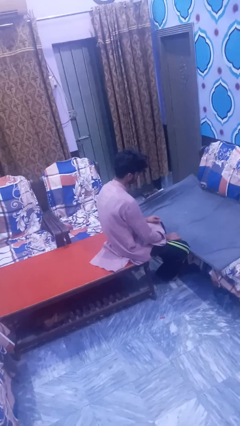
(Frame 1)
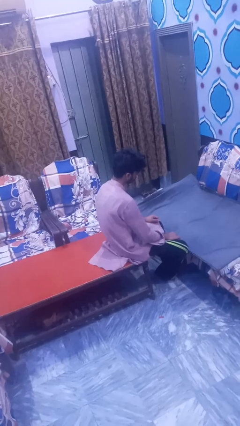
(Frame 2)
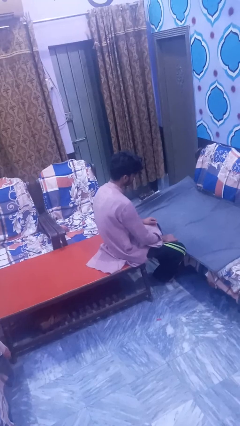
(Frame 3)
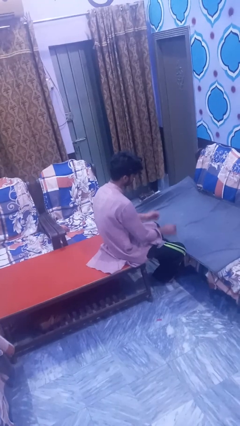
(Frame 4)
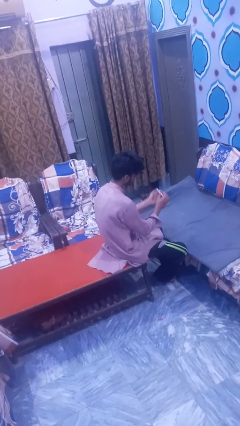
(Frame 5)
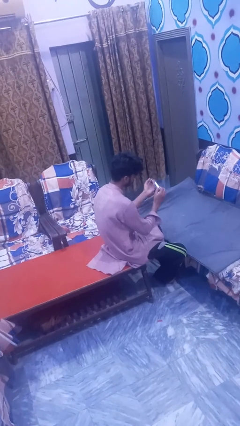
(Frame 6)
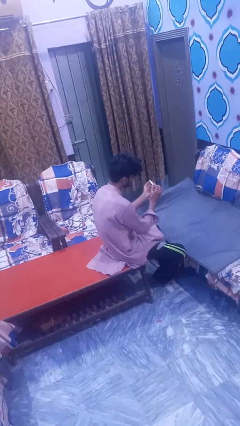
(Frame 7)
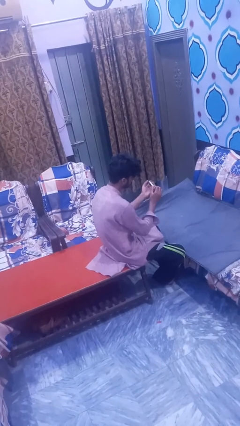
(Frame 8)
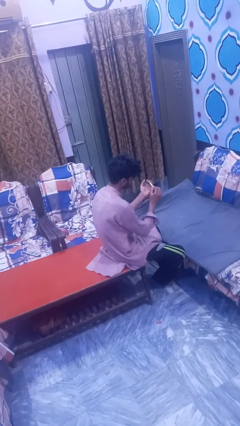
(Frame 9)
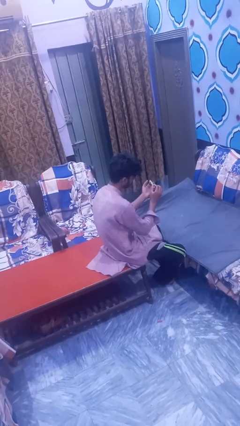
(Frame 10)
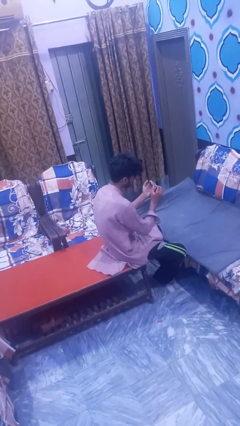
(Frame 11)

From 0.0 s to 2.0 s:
person files fingernails

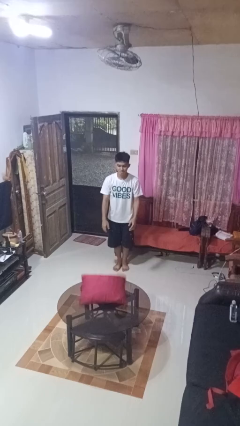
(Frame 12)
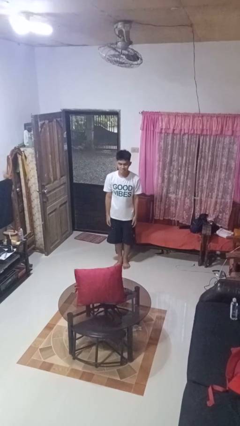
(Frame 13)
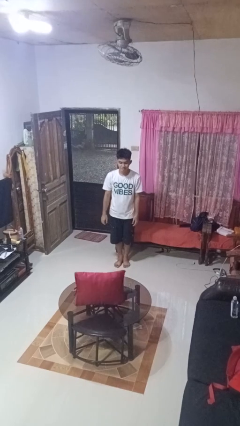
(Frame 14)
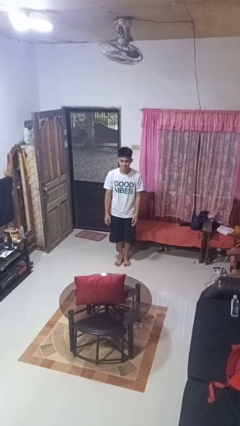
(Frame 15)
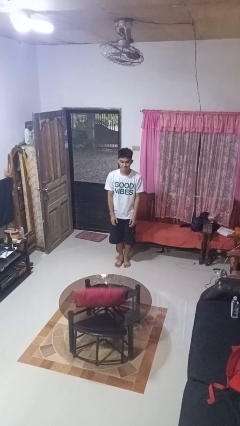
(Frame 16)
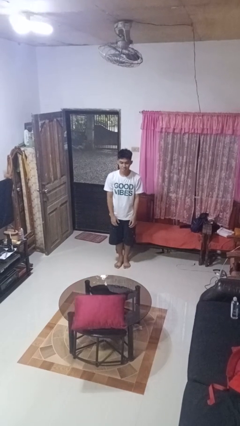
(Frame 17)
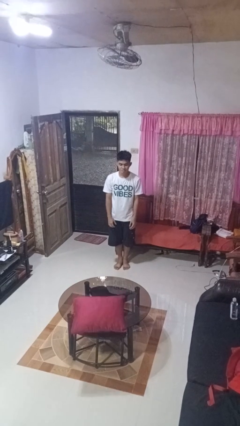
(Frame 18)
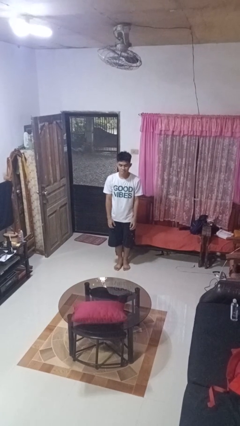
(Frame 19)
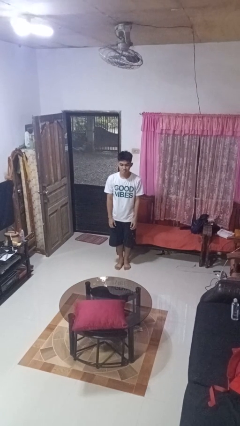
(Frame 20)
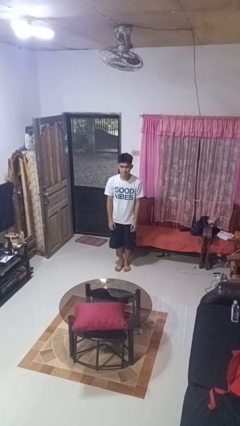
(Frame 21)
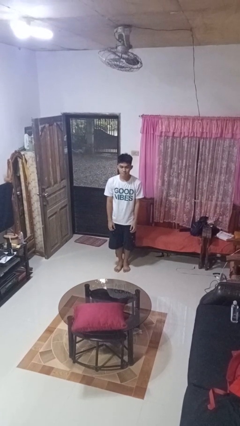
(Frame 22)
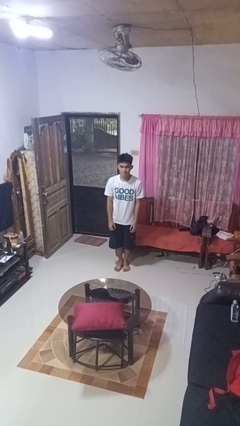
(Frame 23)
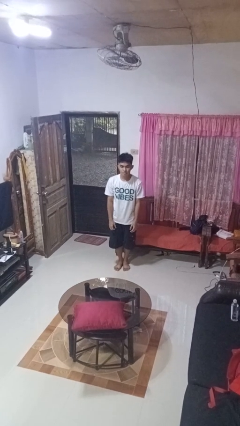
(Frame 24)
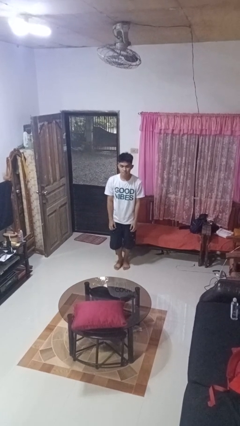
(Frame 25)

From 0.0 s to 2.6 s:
person throws object on table

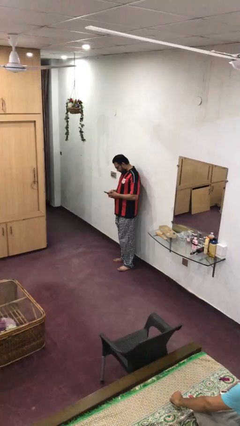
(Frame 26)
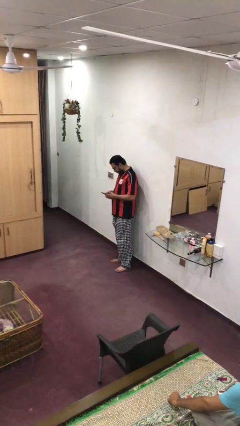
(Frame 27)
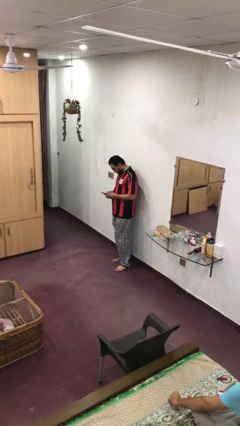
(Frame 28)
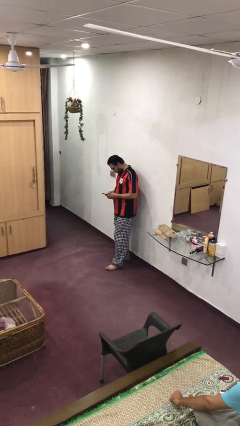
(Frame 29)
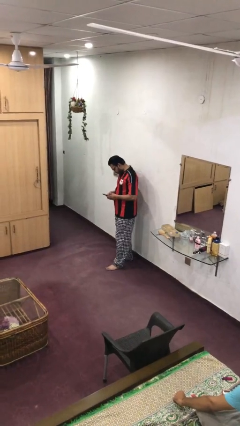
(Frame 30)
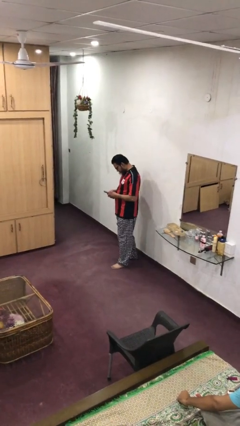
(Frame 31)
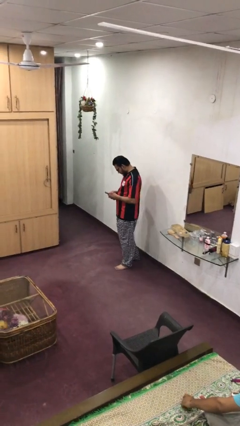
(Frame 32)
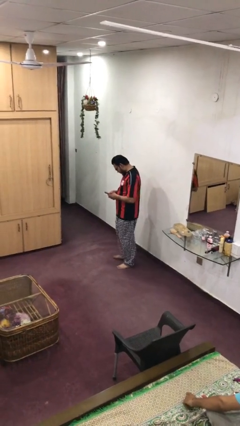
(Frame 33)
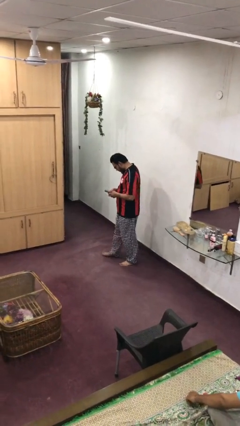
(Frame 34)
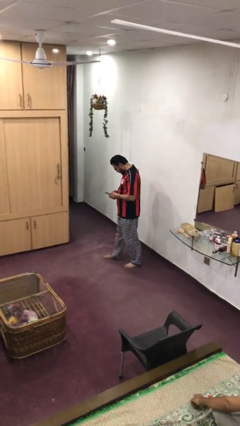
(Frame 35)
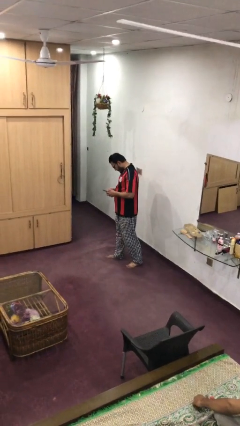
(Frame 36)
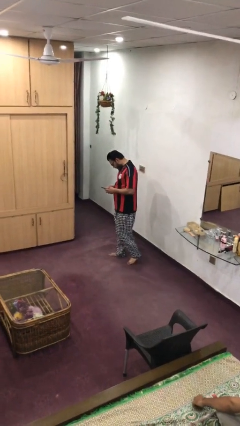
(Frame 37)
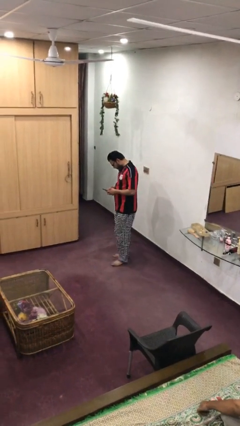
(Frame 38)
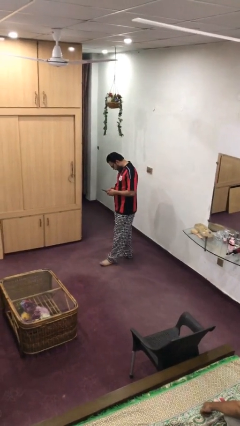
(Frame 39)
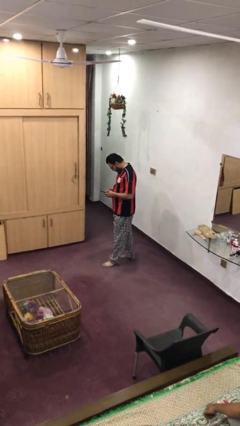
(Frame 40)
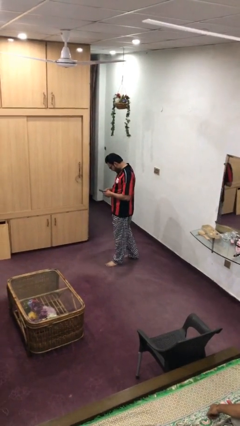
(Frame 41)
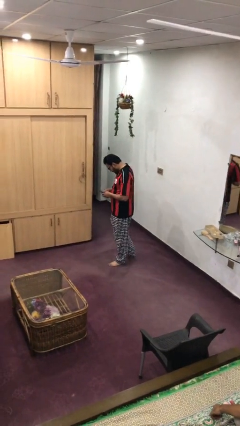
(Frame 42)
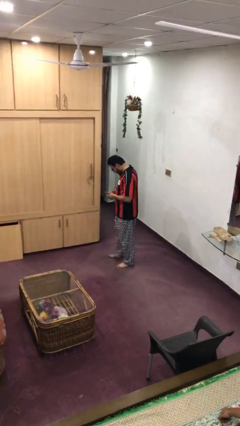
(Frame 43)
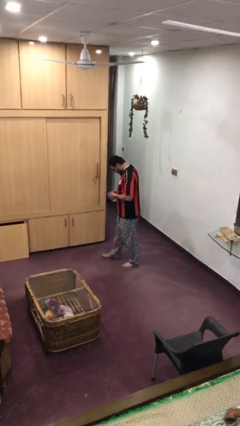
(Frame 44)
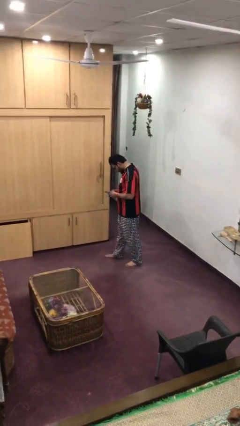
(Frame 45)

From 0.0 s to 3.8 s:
person texts on phone

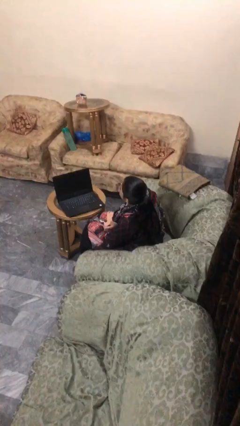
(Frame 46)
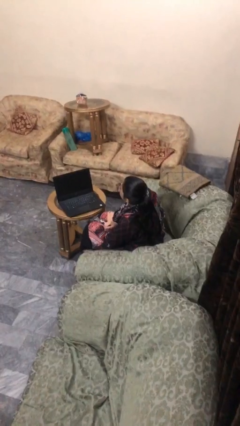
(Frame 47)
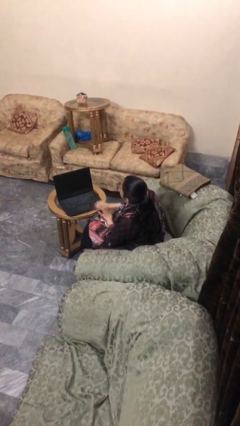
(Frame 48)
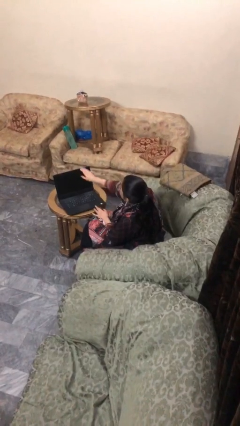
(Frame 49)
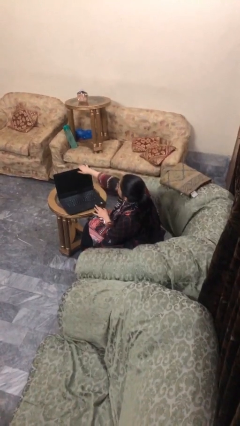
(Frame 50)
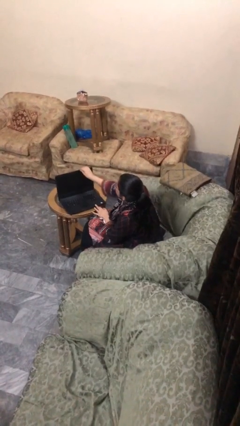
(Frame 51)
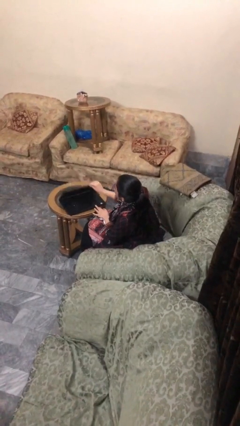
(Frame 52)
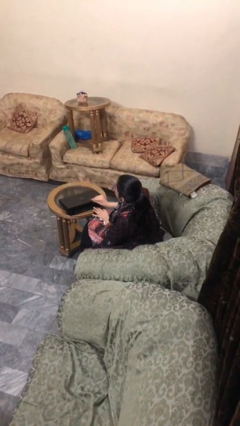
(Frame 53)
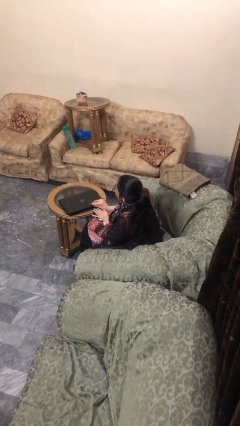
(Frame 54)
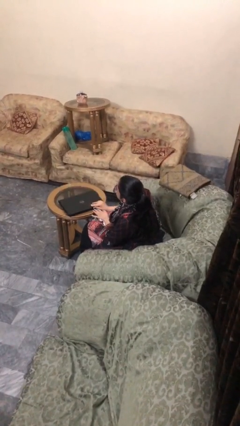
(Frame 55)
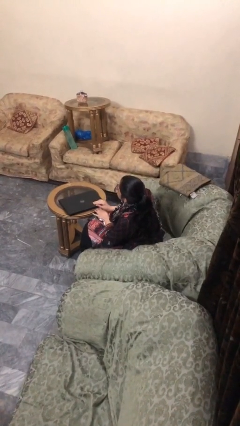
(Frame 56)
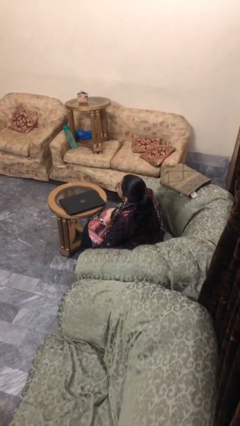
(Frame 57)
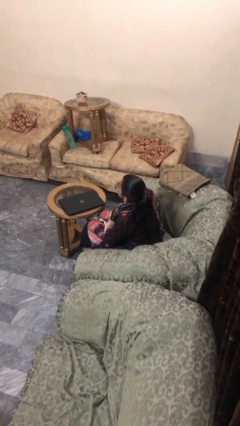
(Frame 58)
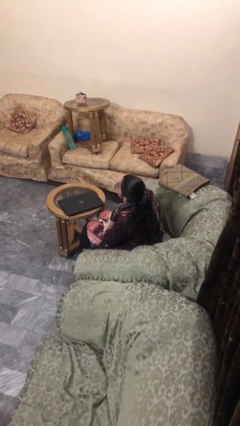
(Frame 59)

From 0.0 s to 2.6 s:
person closes laptop

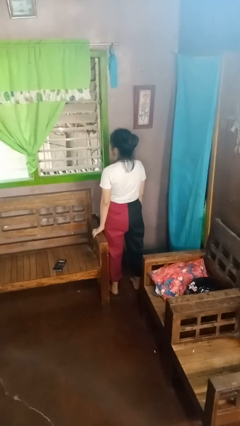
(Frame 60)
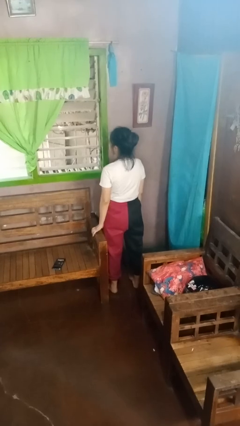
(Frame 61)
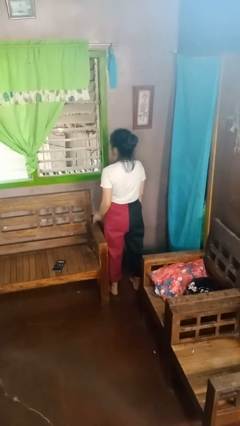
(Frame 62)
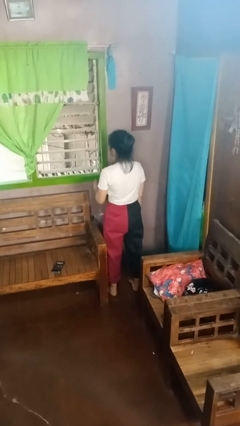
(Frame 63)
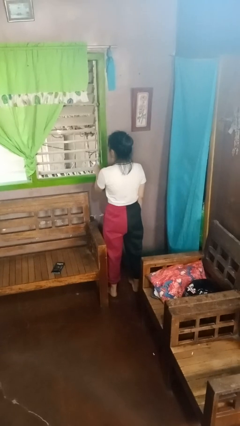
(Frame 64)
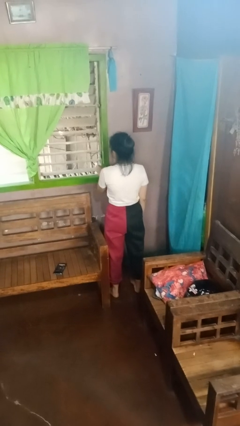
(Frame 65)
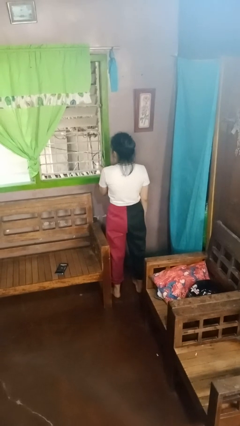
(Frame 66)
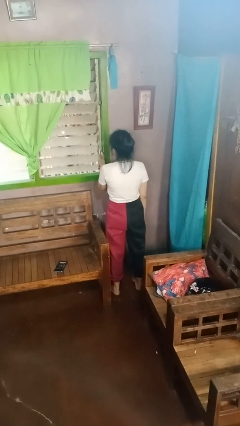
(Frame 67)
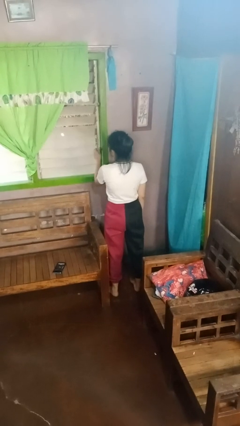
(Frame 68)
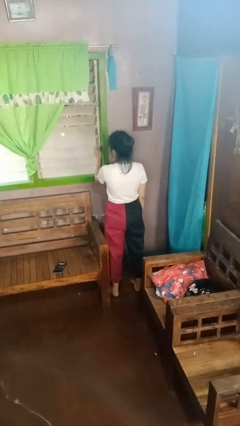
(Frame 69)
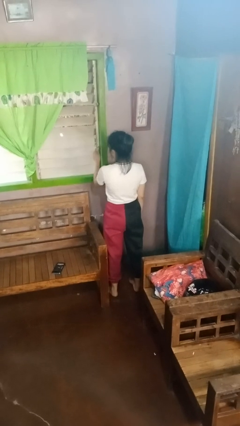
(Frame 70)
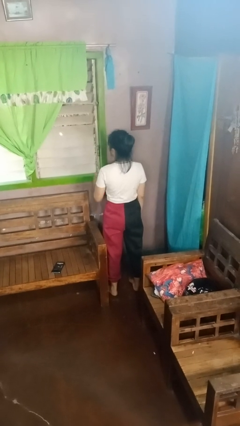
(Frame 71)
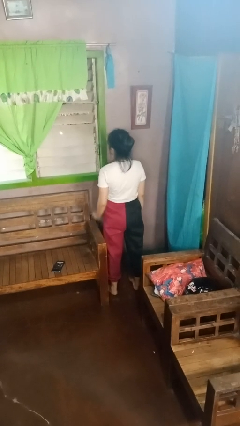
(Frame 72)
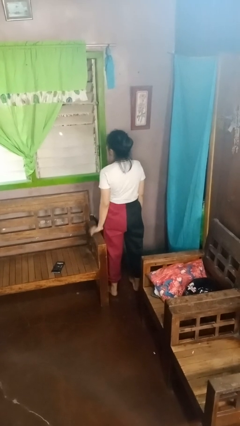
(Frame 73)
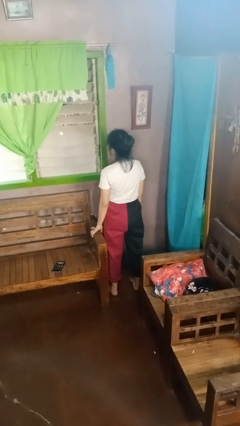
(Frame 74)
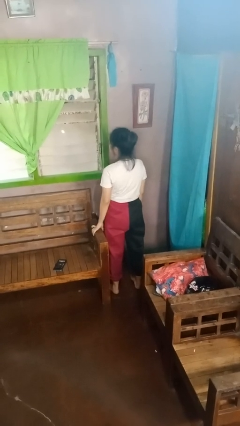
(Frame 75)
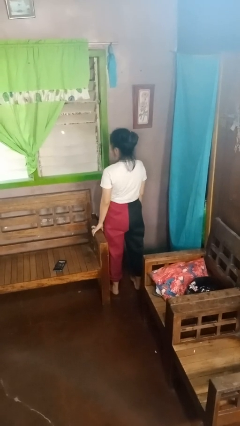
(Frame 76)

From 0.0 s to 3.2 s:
person closes home window

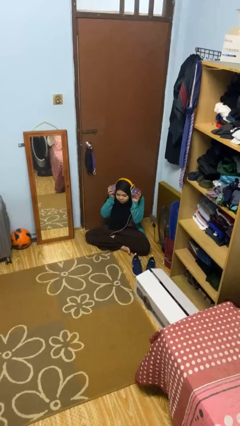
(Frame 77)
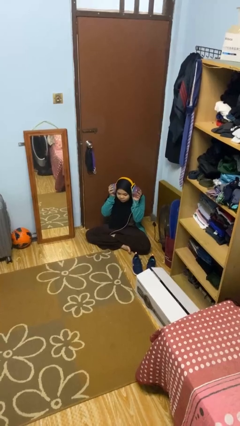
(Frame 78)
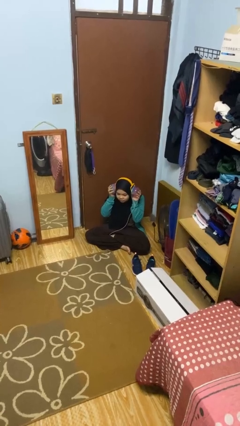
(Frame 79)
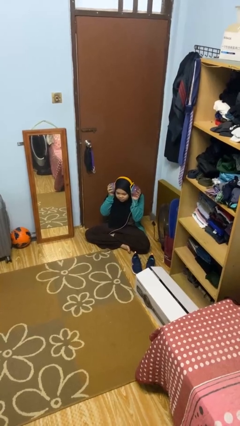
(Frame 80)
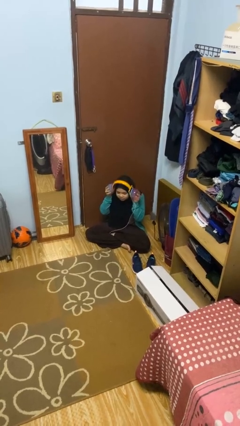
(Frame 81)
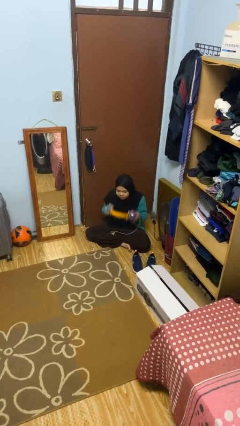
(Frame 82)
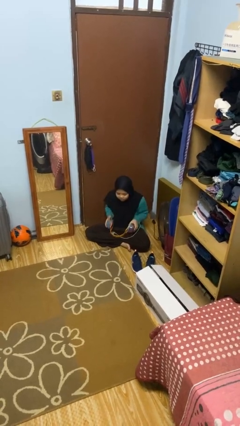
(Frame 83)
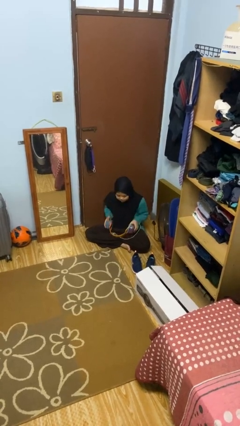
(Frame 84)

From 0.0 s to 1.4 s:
person takes off headphones

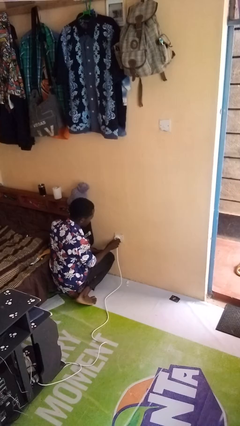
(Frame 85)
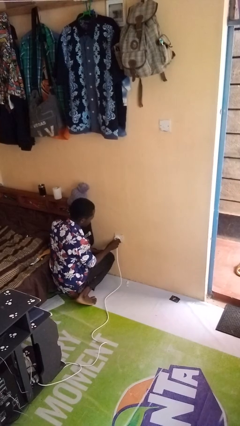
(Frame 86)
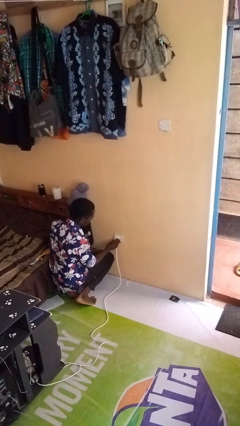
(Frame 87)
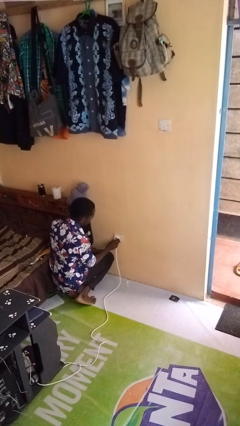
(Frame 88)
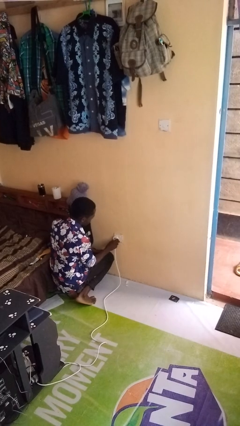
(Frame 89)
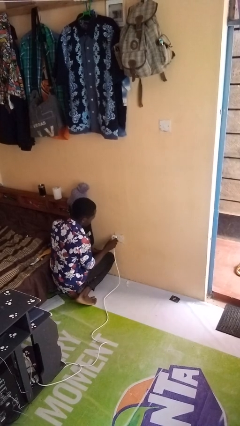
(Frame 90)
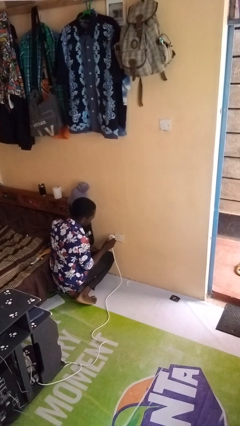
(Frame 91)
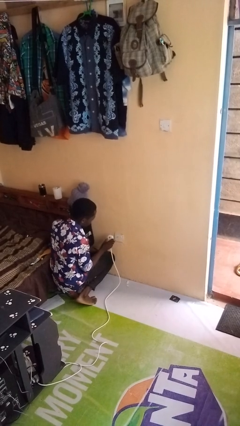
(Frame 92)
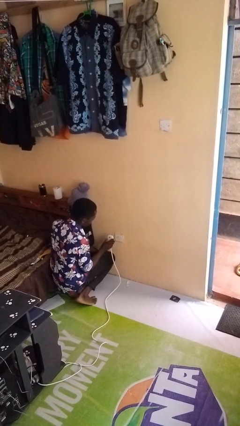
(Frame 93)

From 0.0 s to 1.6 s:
person unplugs from electrical socket
